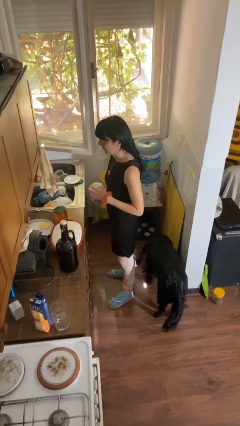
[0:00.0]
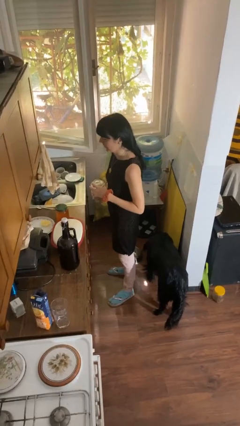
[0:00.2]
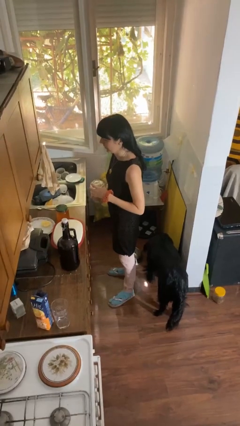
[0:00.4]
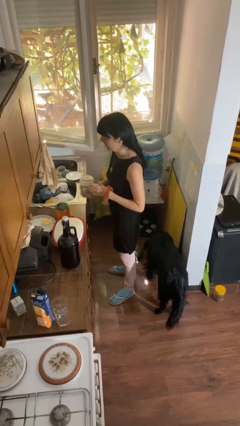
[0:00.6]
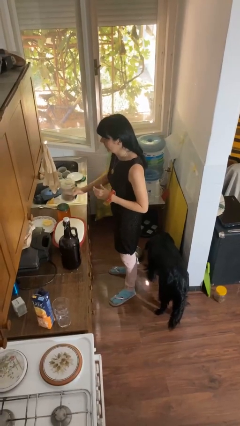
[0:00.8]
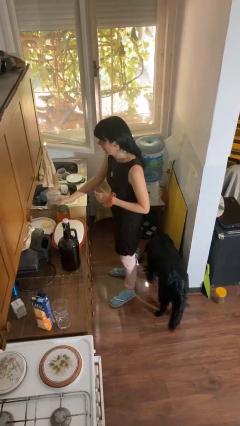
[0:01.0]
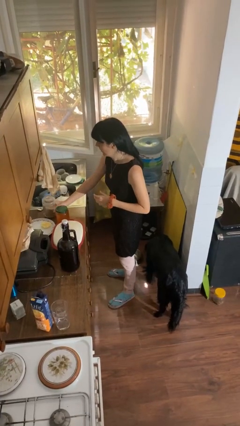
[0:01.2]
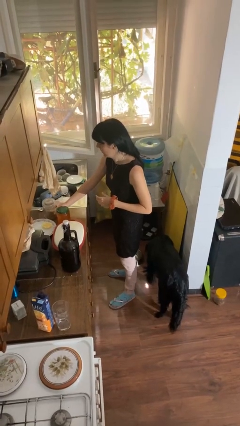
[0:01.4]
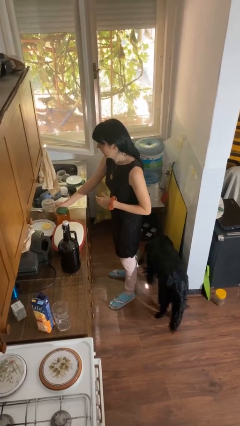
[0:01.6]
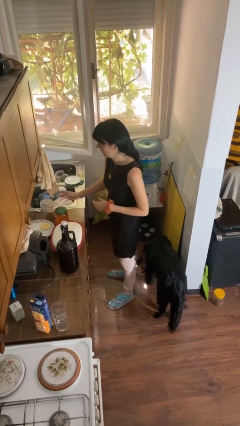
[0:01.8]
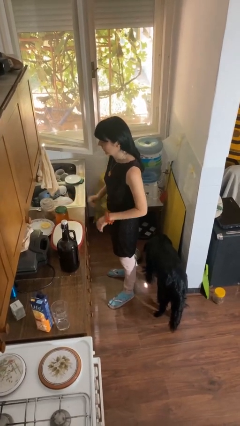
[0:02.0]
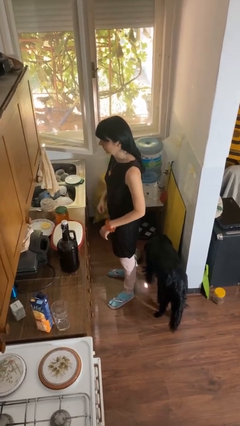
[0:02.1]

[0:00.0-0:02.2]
person puts down object on countertop

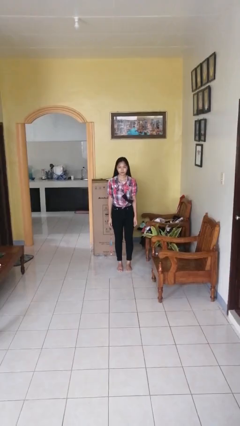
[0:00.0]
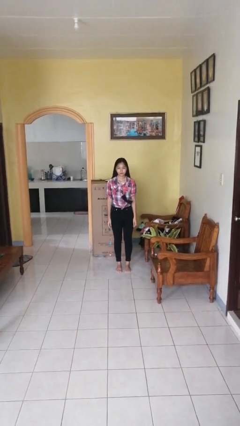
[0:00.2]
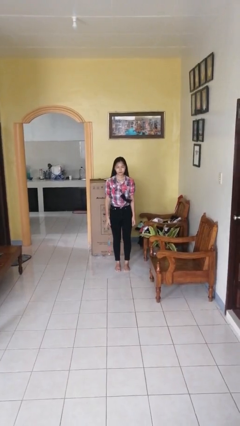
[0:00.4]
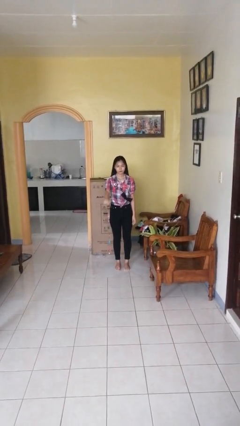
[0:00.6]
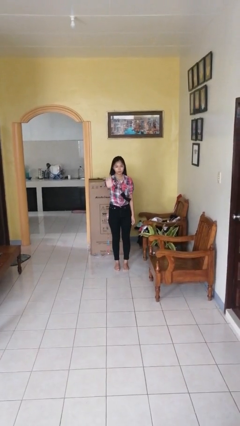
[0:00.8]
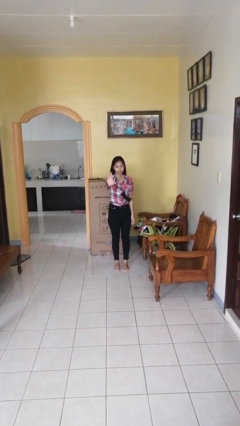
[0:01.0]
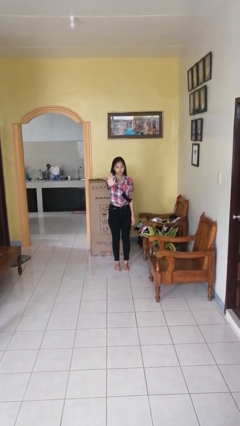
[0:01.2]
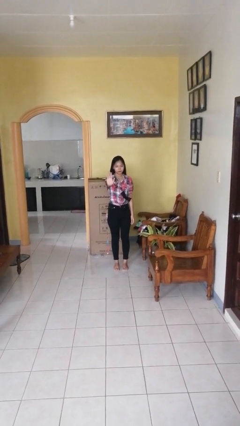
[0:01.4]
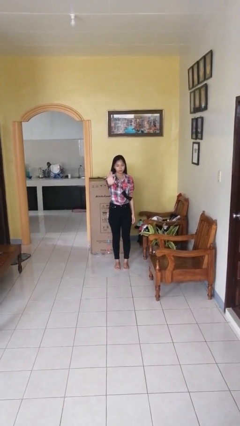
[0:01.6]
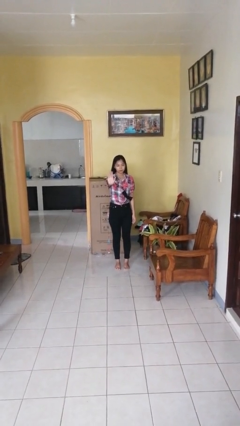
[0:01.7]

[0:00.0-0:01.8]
person gestures stop

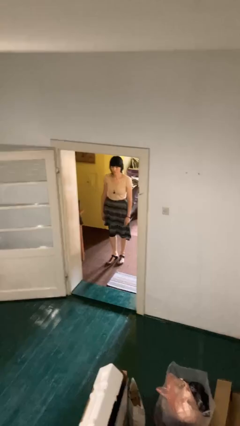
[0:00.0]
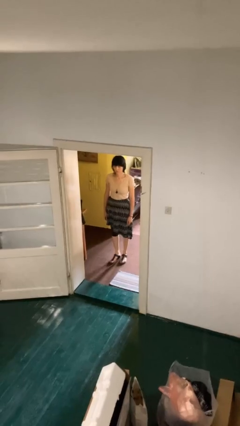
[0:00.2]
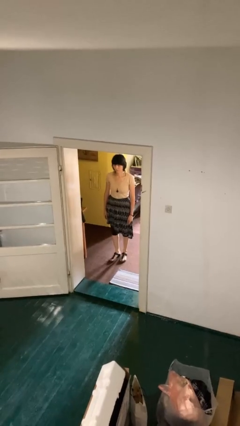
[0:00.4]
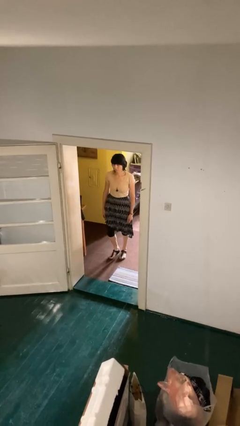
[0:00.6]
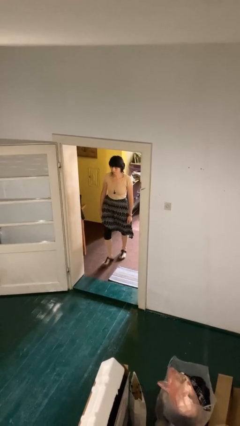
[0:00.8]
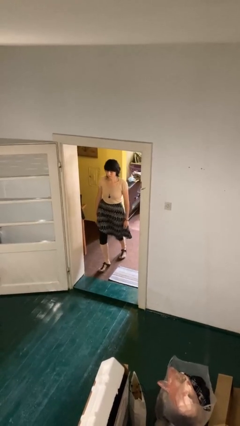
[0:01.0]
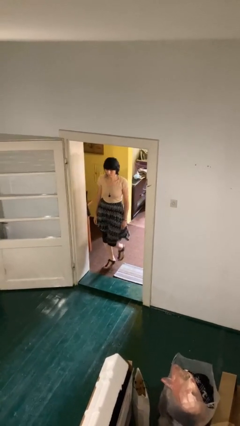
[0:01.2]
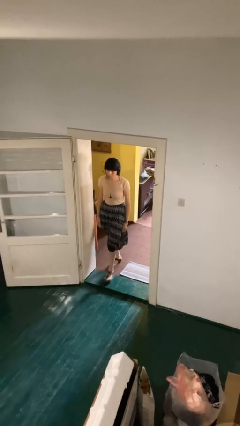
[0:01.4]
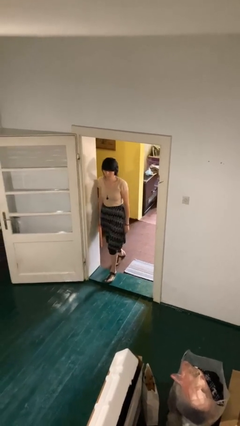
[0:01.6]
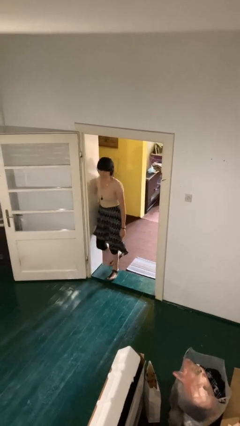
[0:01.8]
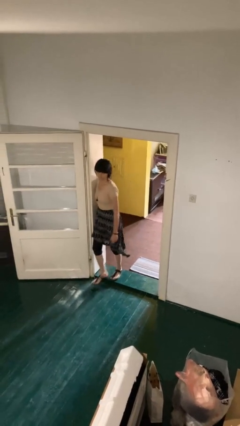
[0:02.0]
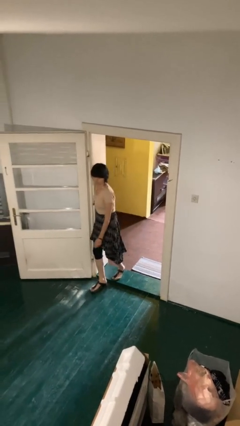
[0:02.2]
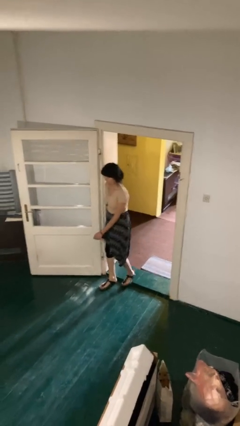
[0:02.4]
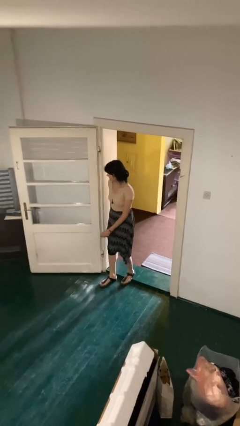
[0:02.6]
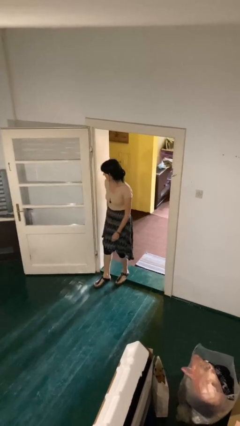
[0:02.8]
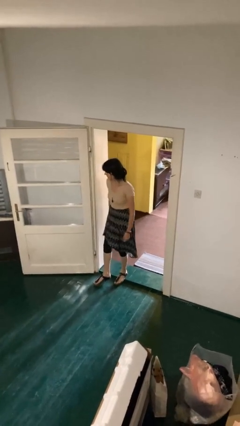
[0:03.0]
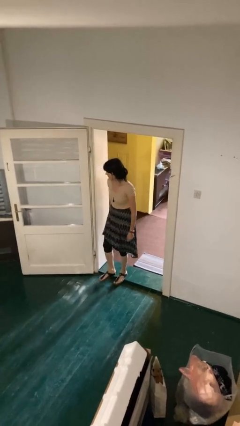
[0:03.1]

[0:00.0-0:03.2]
person bumps into wall

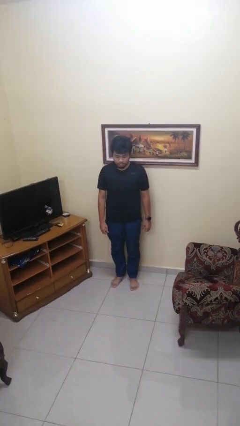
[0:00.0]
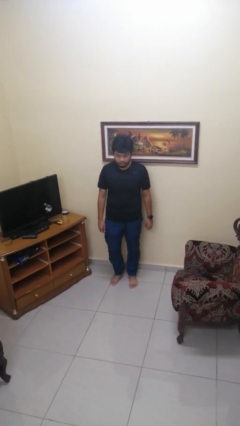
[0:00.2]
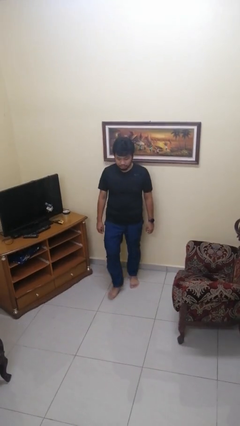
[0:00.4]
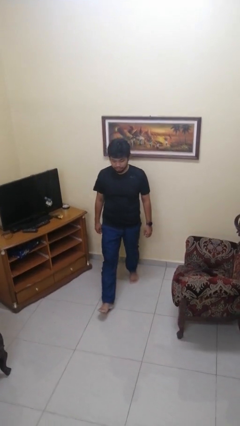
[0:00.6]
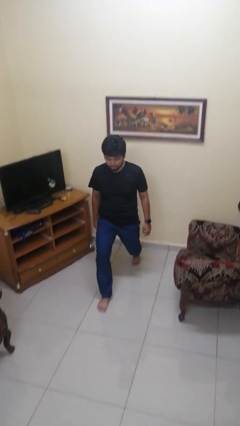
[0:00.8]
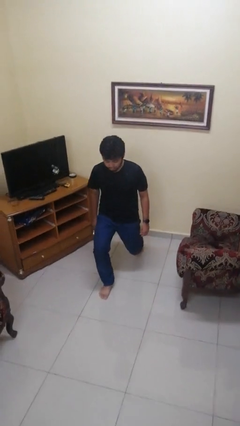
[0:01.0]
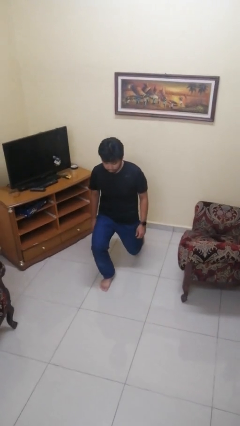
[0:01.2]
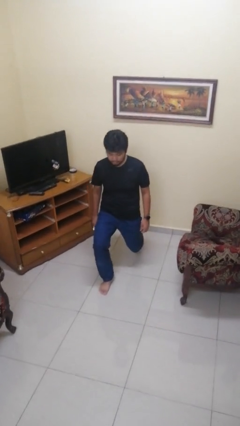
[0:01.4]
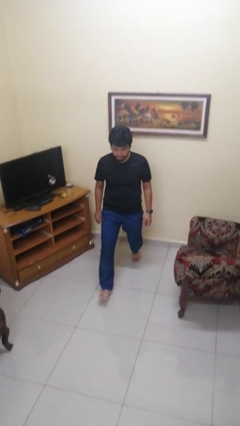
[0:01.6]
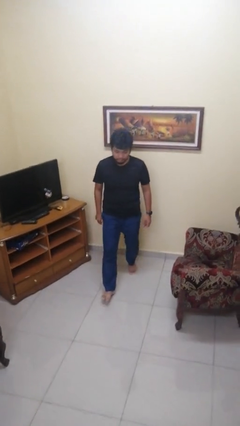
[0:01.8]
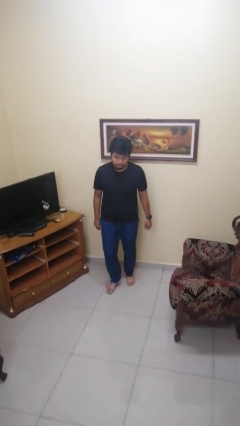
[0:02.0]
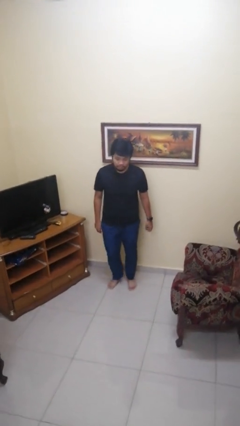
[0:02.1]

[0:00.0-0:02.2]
person exercises with lunges

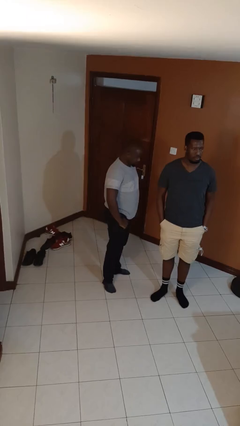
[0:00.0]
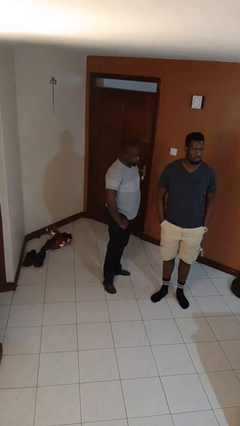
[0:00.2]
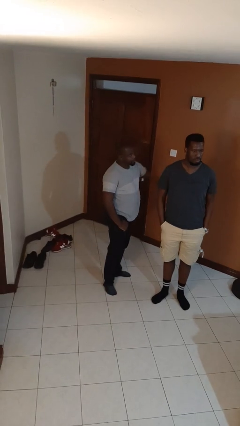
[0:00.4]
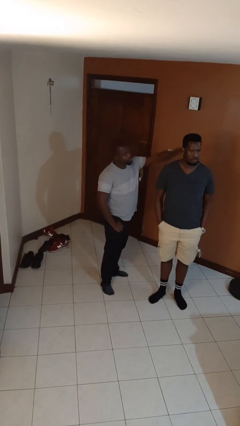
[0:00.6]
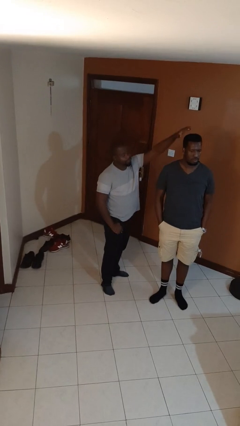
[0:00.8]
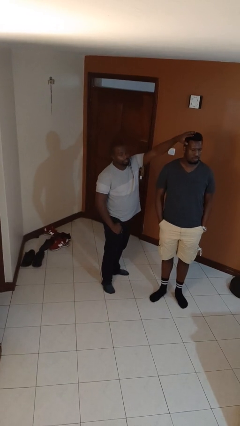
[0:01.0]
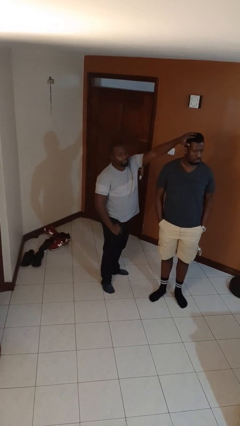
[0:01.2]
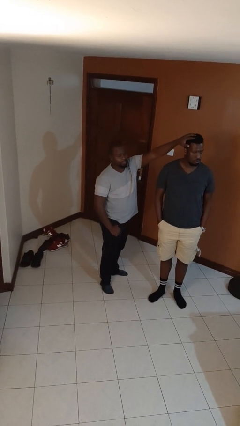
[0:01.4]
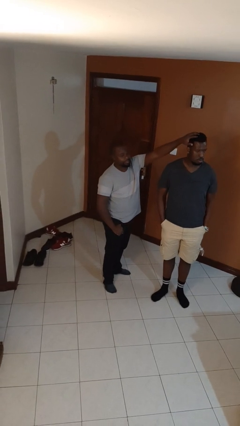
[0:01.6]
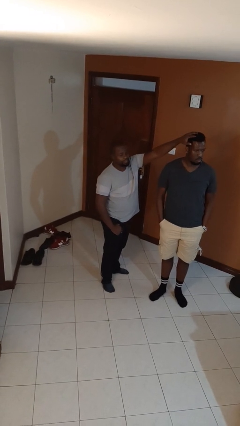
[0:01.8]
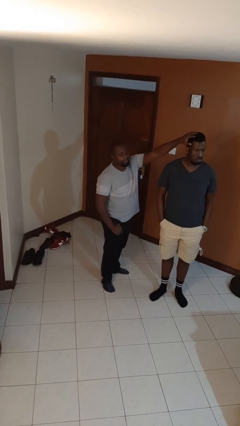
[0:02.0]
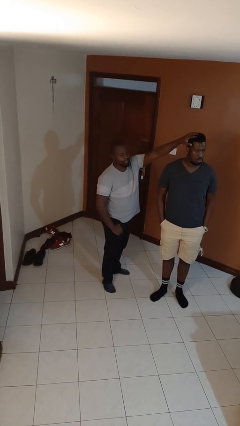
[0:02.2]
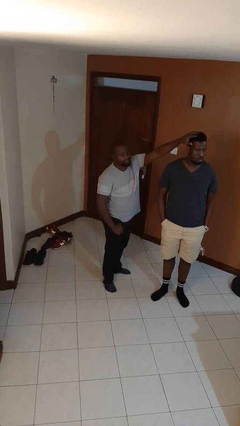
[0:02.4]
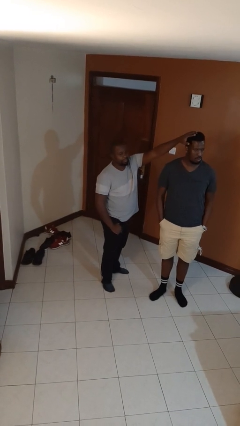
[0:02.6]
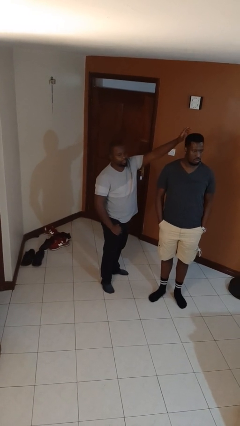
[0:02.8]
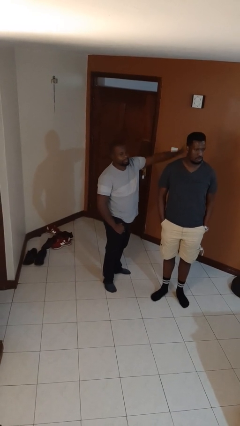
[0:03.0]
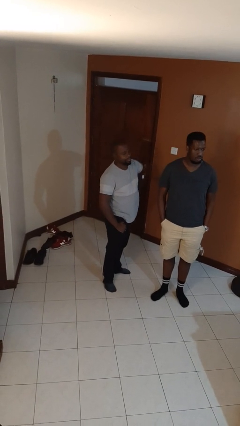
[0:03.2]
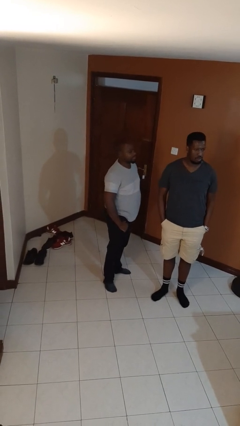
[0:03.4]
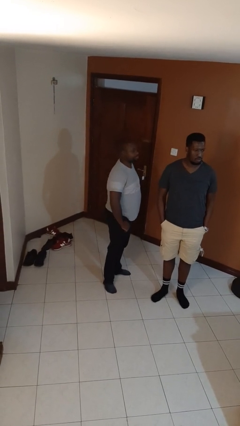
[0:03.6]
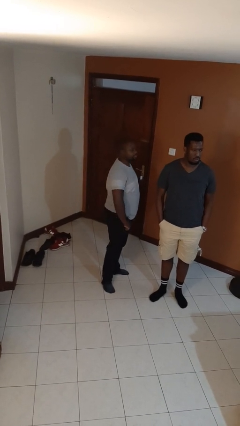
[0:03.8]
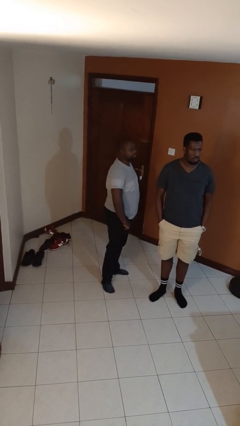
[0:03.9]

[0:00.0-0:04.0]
person grabs person by hair

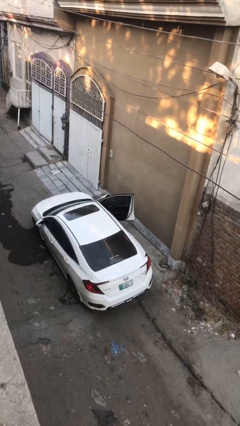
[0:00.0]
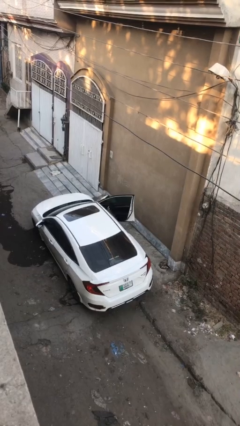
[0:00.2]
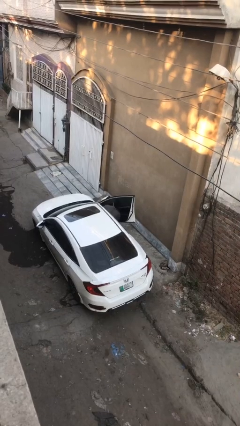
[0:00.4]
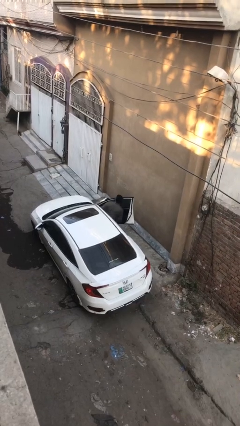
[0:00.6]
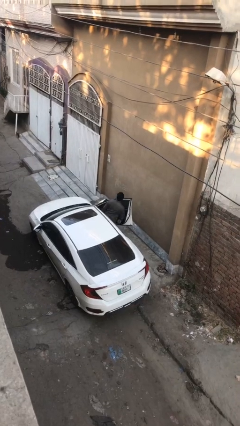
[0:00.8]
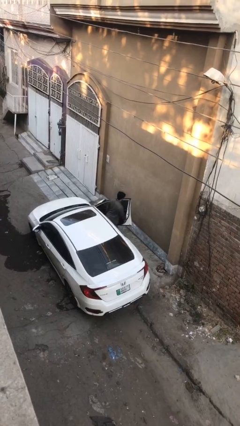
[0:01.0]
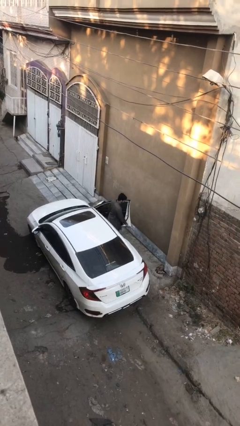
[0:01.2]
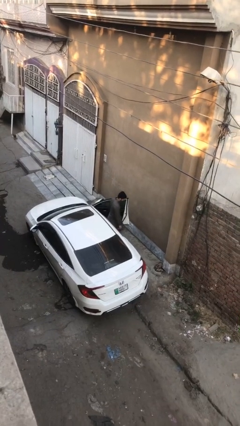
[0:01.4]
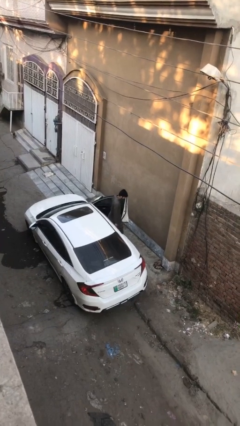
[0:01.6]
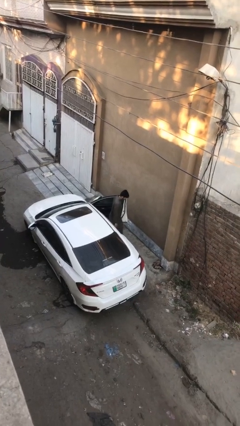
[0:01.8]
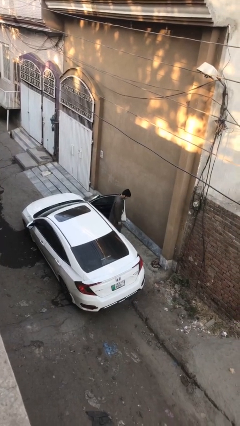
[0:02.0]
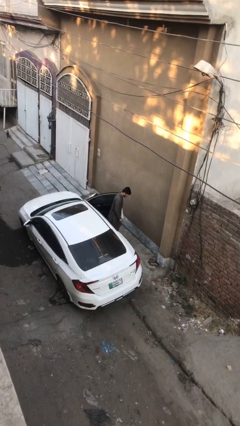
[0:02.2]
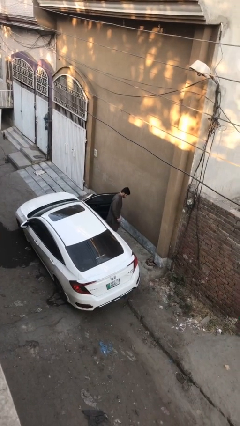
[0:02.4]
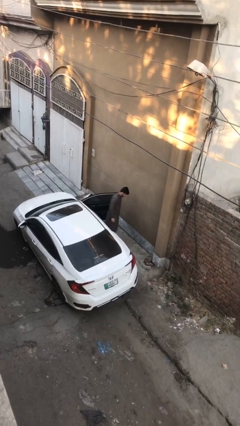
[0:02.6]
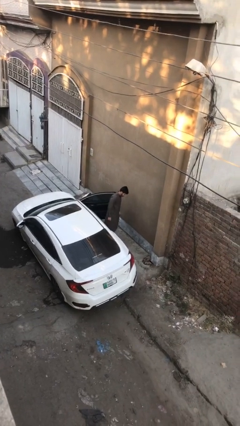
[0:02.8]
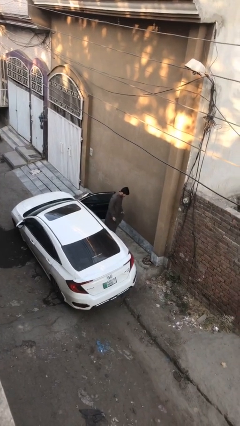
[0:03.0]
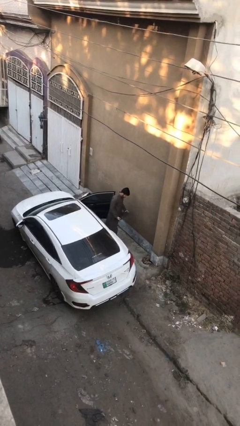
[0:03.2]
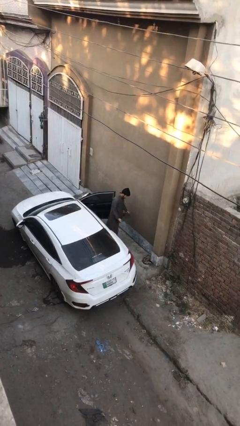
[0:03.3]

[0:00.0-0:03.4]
person exits car

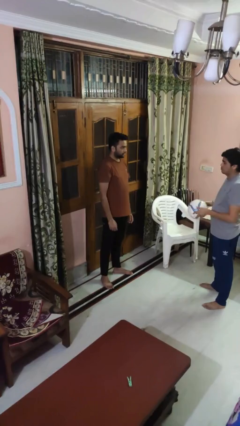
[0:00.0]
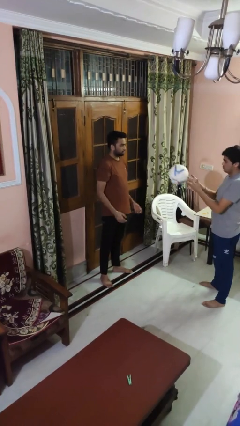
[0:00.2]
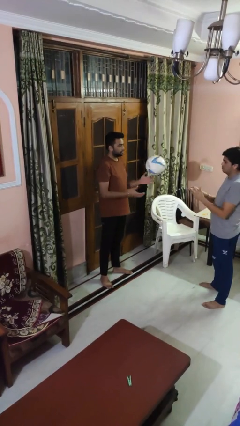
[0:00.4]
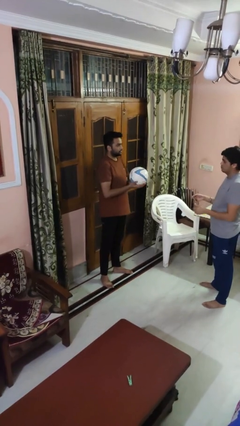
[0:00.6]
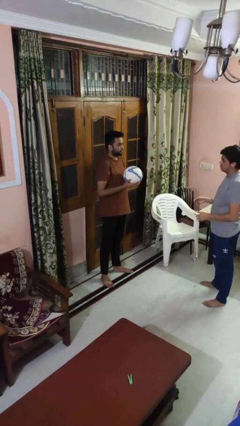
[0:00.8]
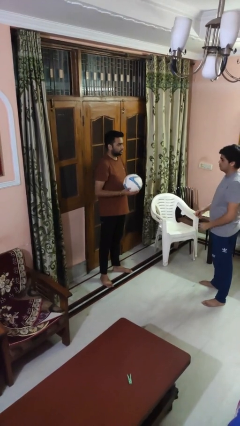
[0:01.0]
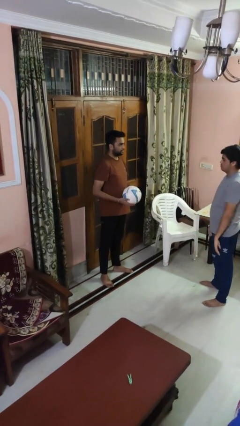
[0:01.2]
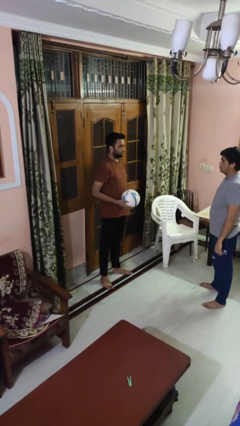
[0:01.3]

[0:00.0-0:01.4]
person catches object from person
